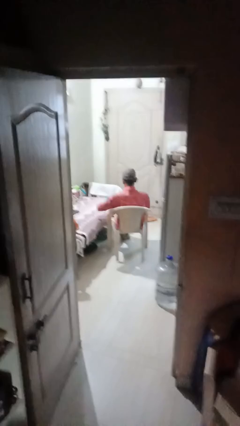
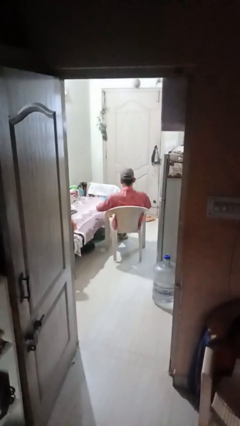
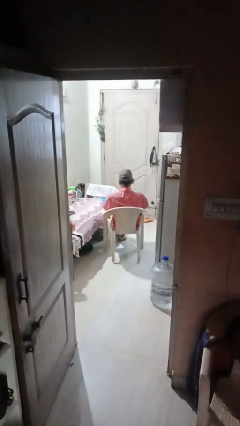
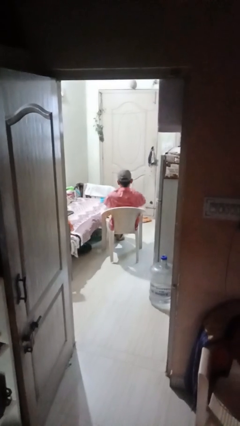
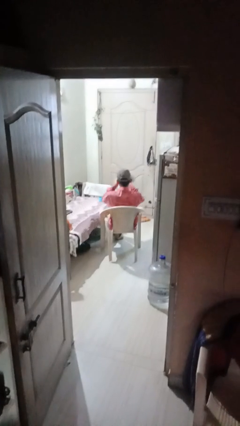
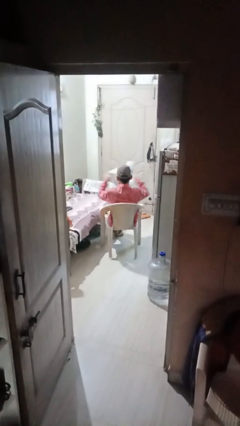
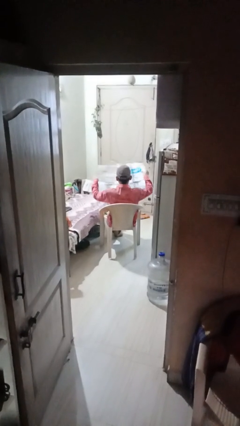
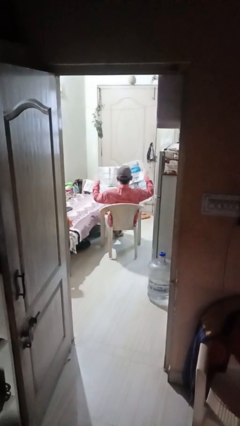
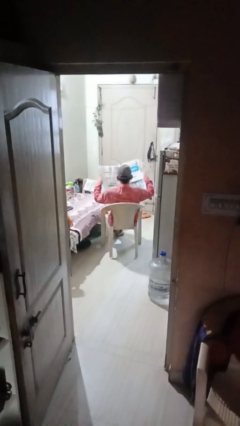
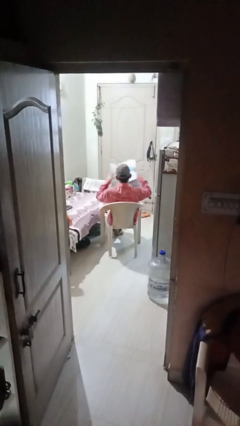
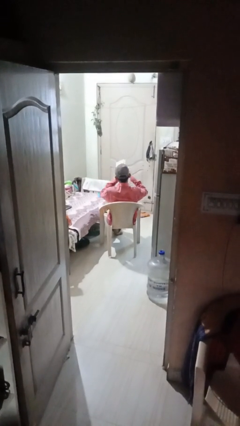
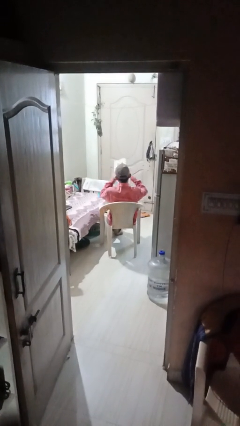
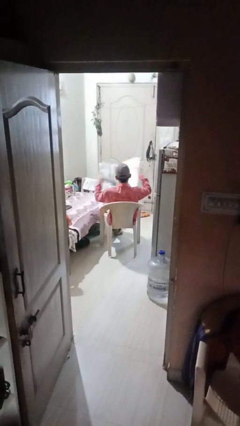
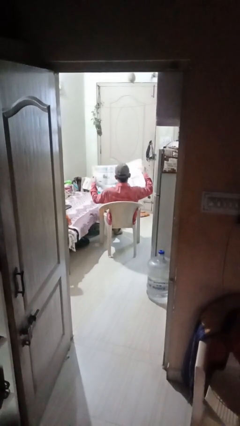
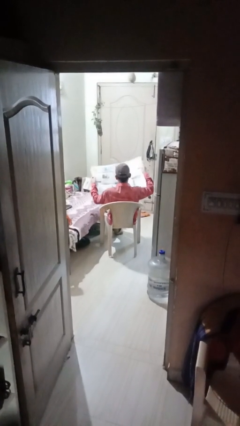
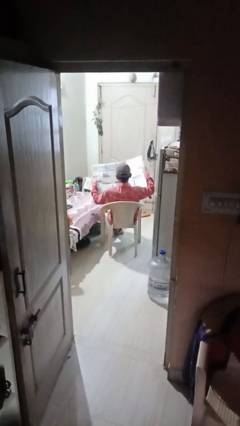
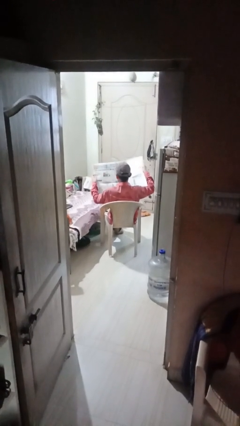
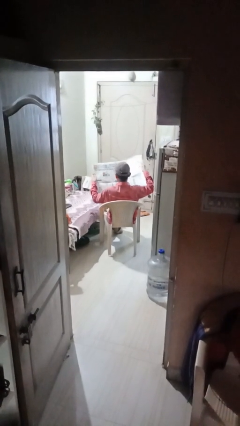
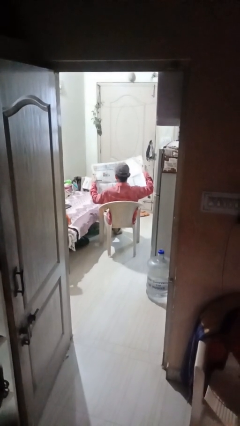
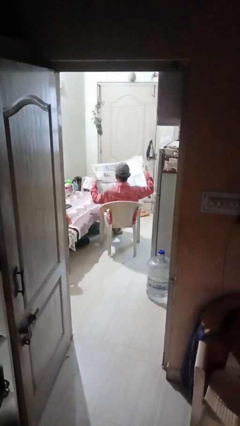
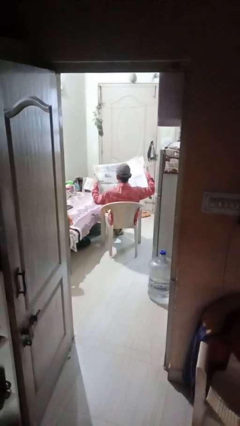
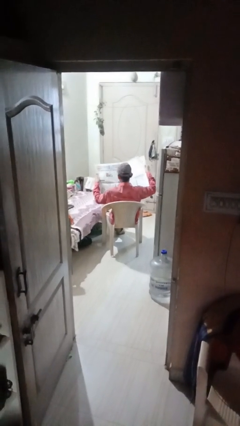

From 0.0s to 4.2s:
person reads newspaper

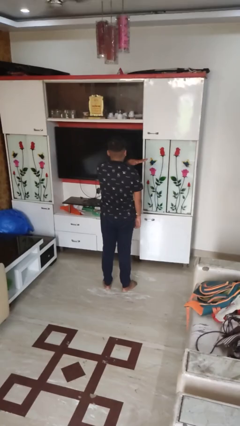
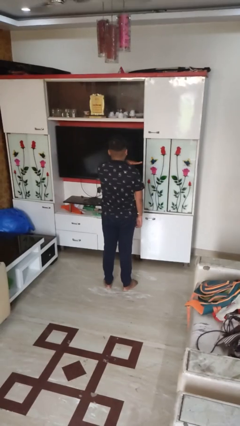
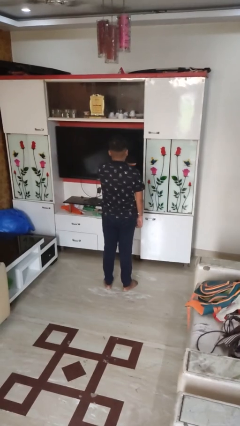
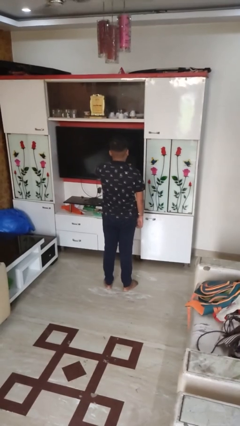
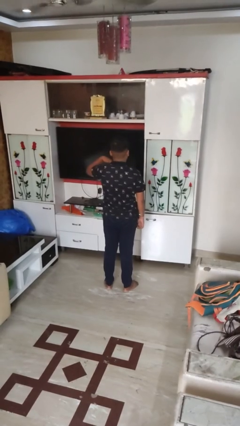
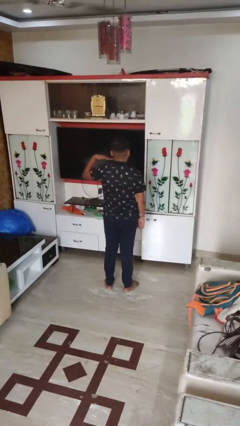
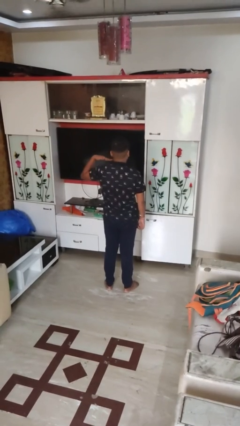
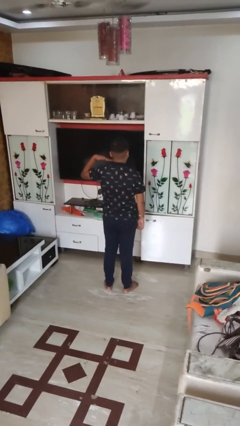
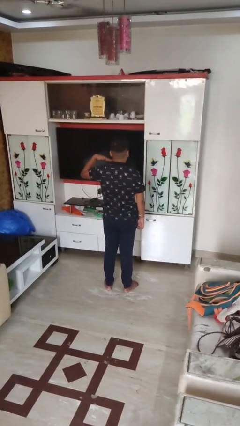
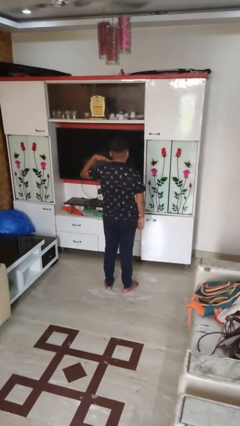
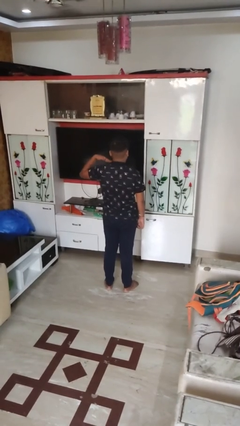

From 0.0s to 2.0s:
person gestures cut

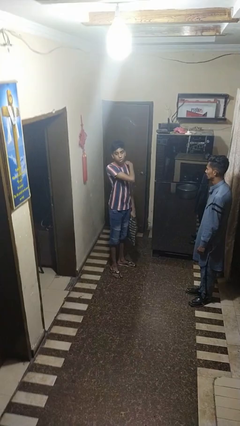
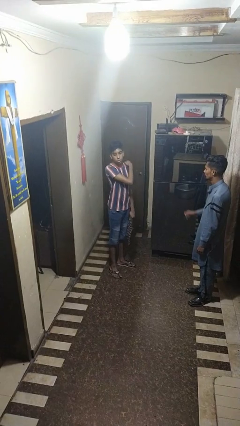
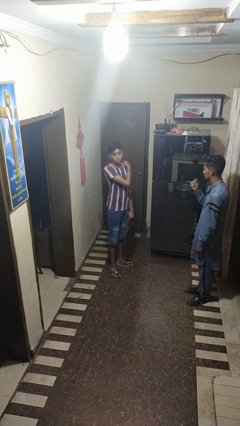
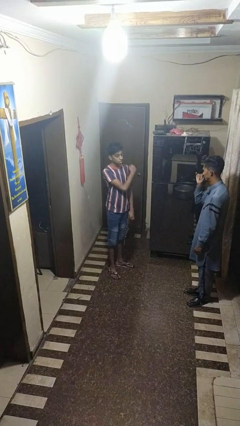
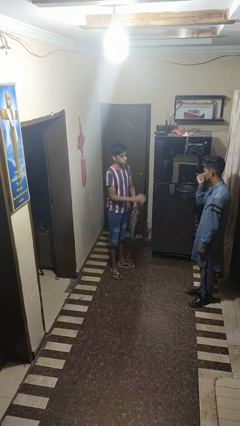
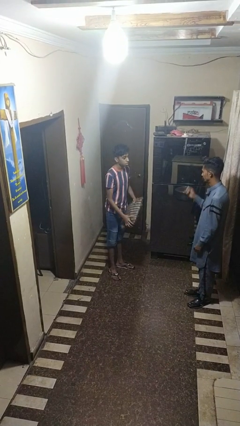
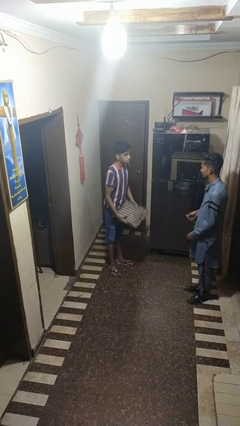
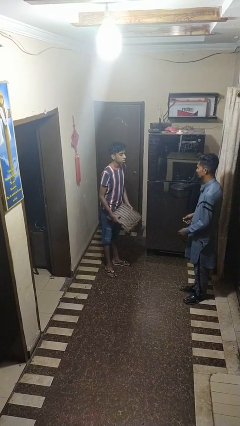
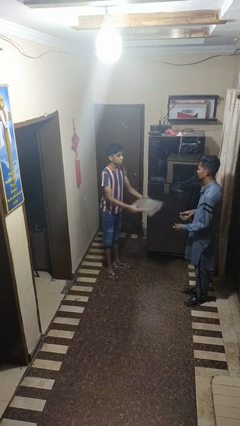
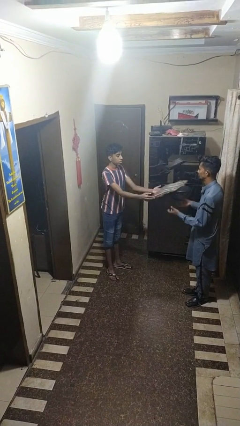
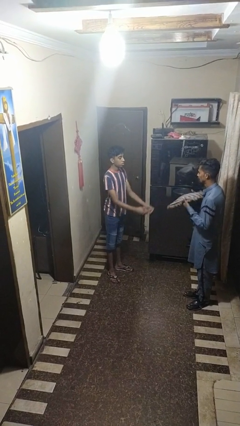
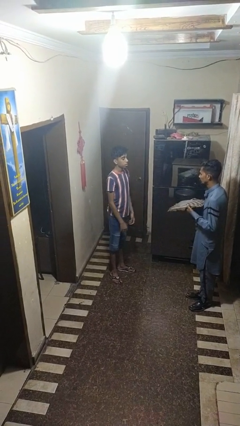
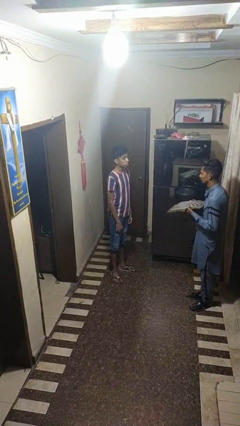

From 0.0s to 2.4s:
person throws object to person

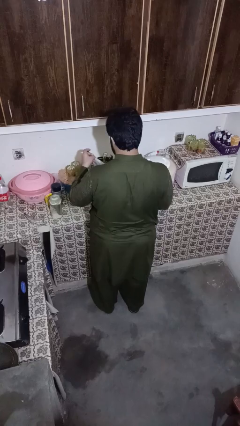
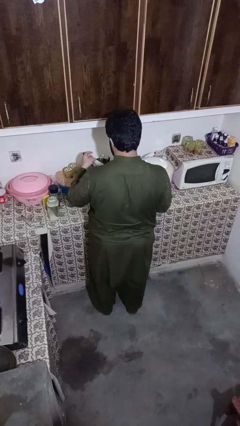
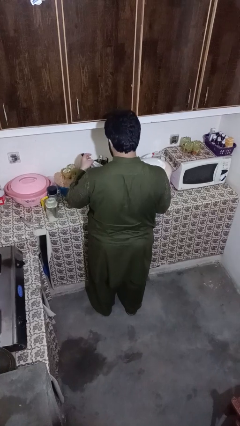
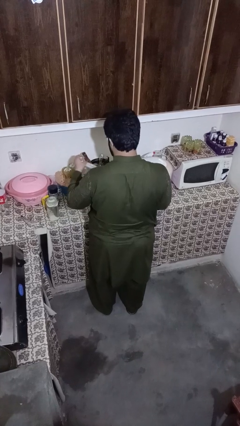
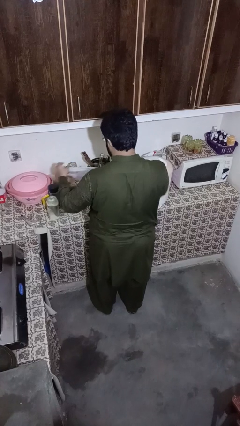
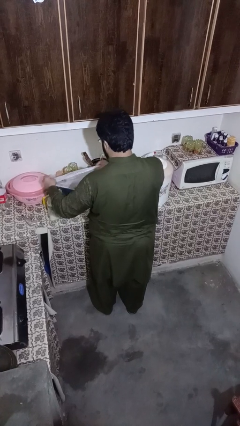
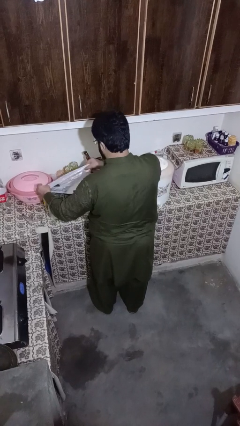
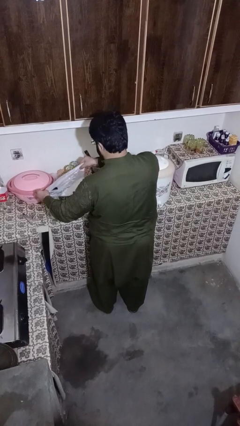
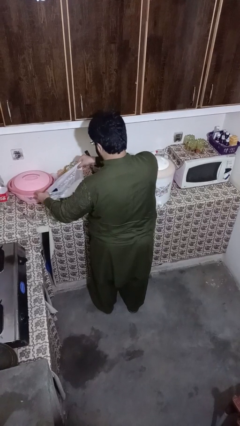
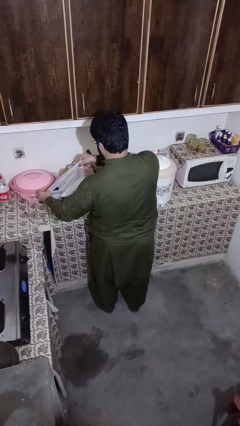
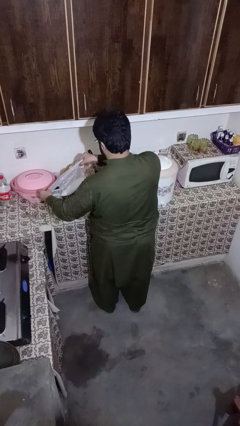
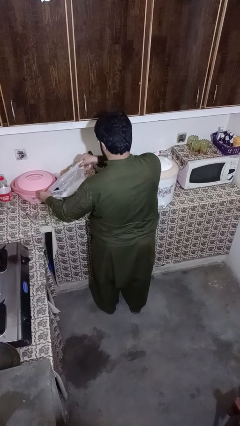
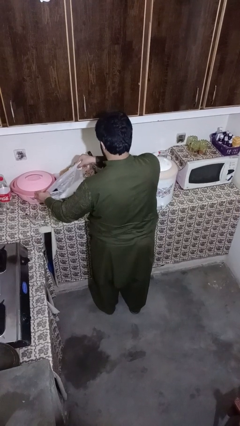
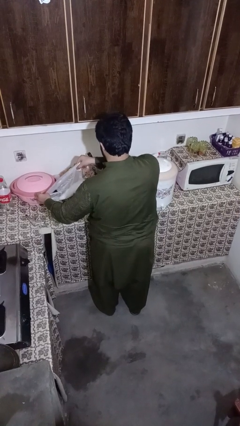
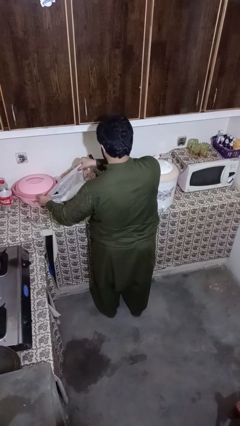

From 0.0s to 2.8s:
person pours into bowl

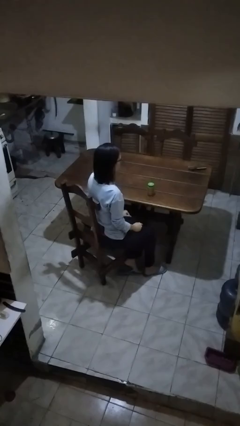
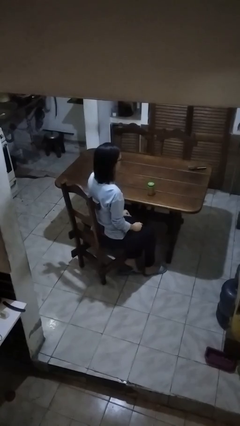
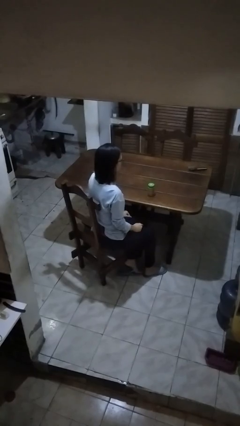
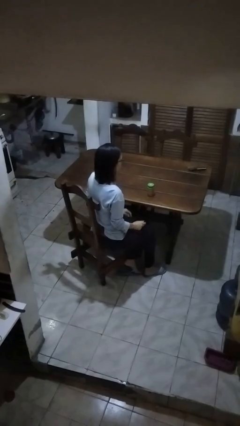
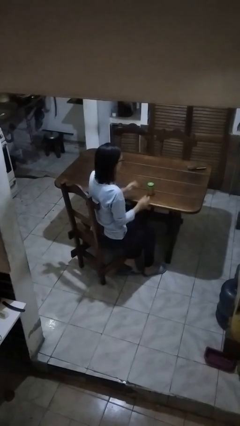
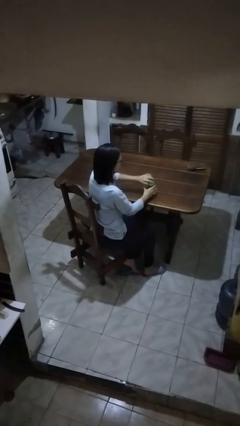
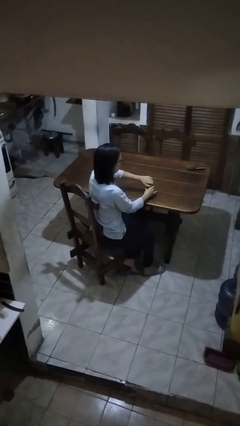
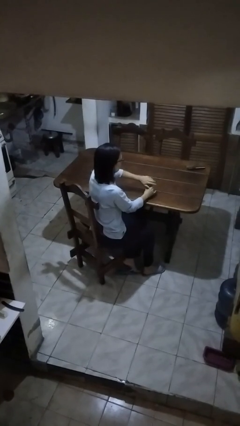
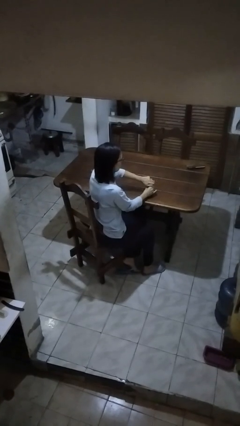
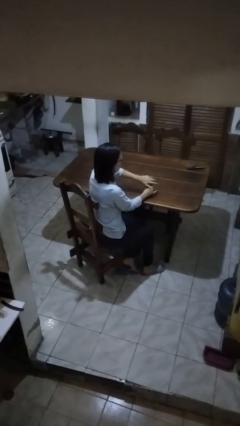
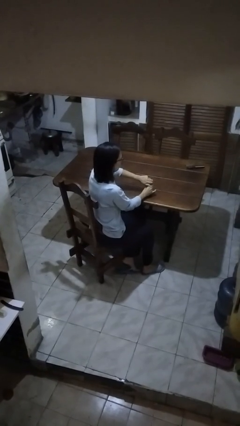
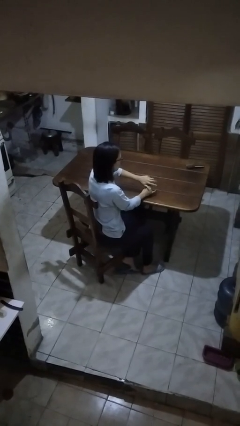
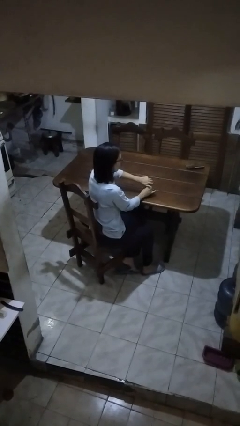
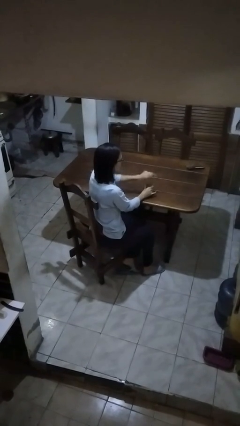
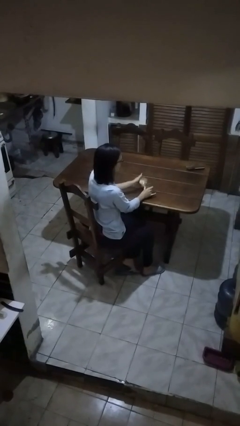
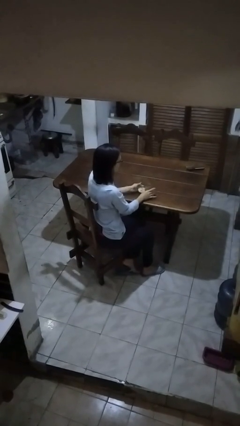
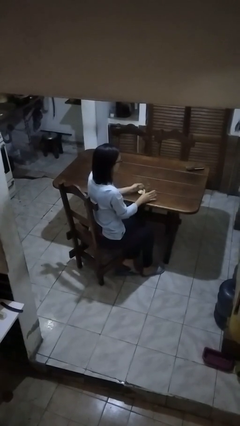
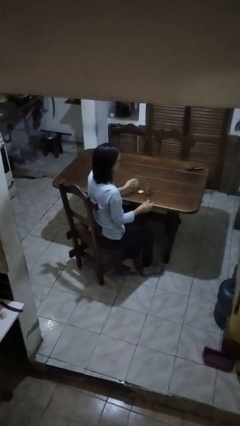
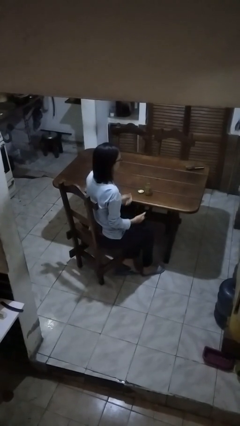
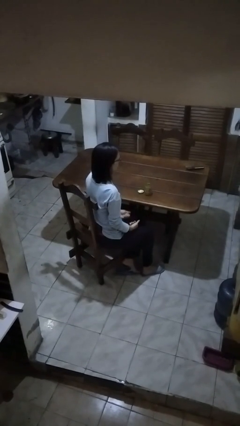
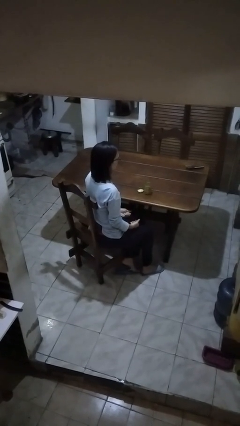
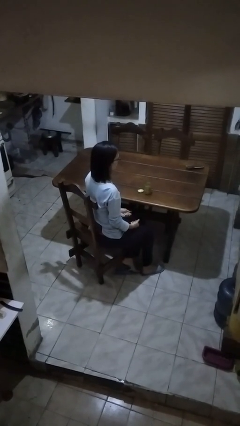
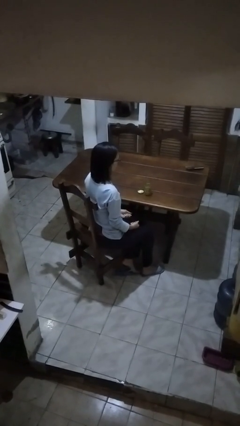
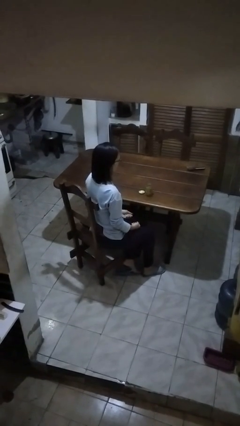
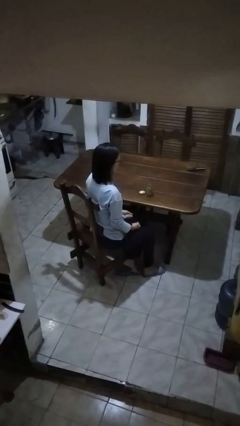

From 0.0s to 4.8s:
person opens jar

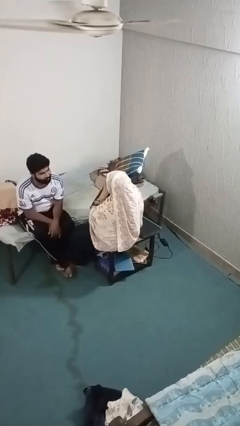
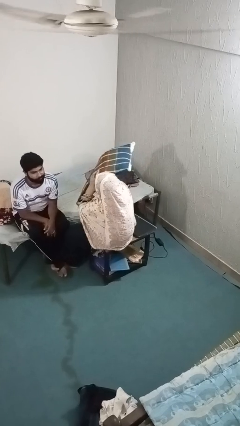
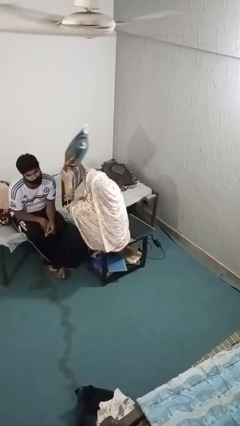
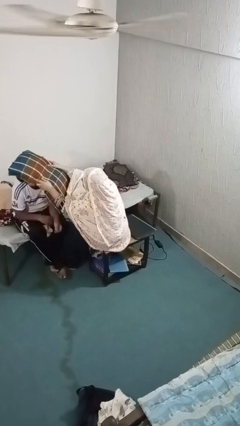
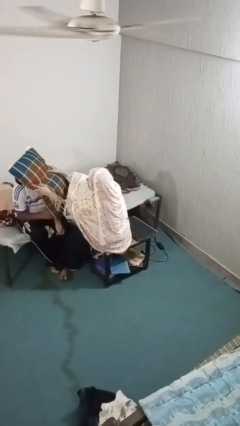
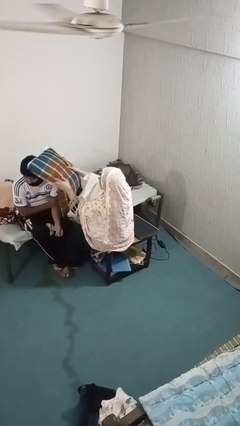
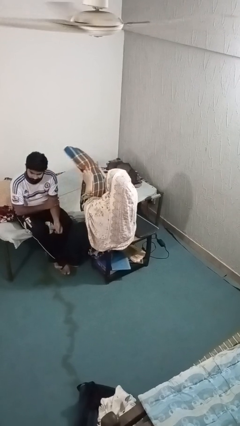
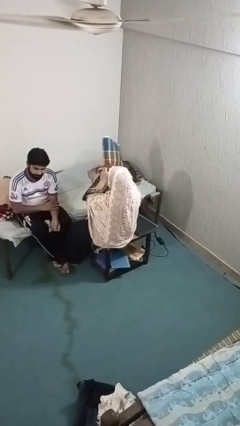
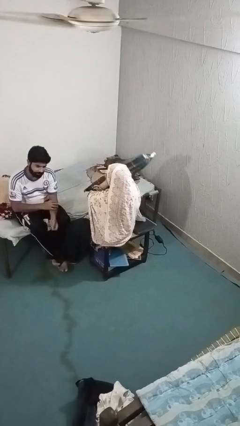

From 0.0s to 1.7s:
person hits person with pillow
